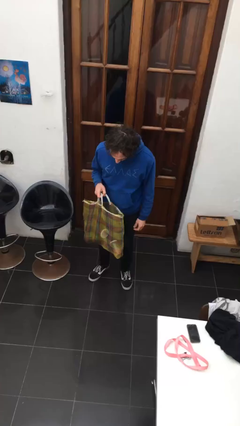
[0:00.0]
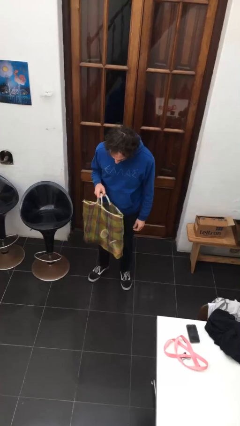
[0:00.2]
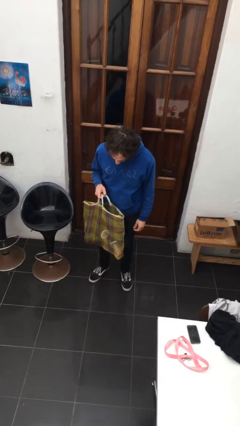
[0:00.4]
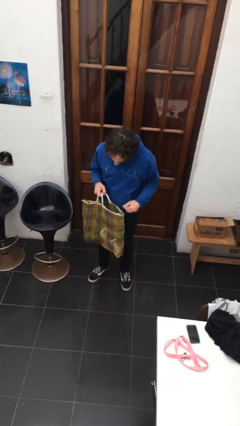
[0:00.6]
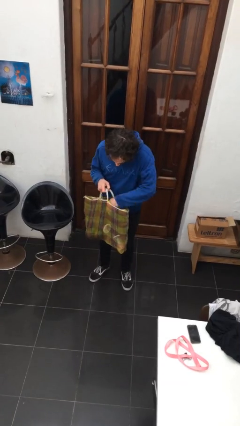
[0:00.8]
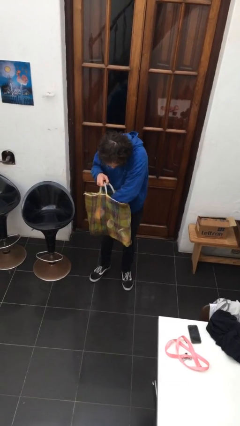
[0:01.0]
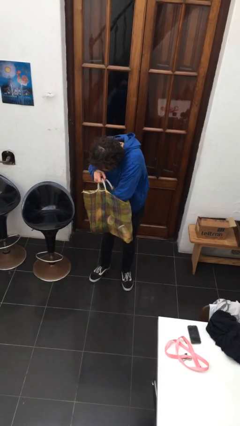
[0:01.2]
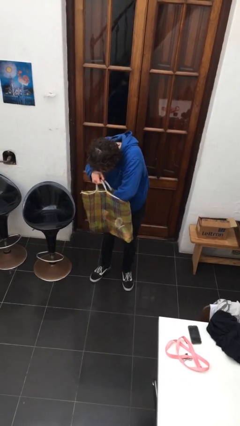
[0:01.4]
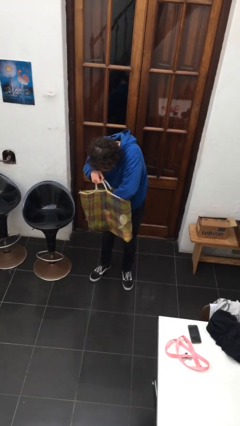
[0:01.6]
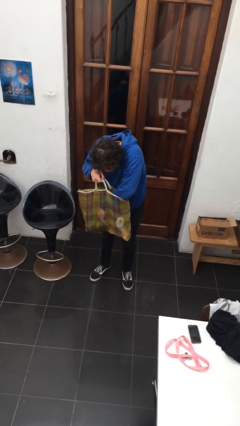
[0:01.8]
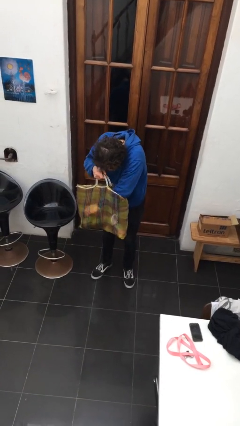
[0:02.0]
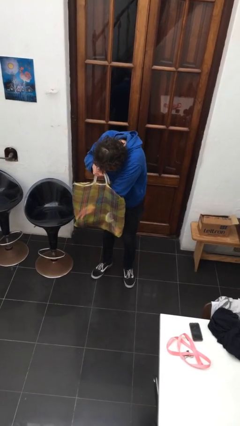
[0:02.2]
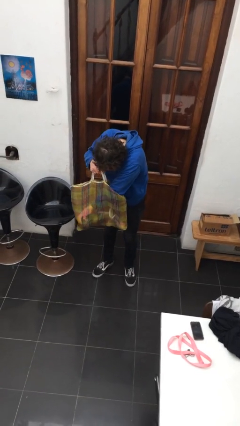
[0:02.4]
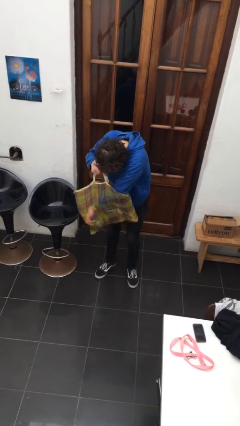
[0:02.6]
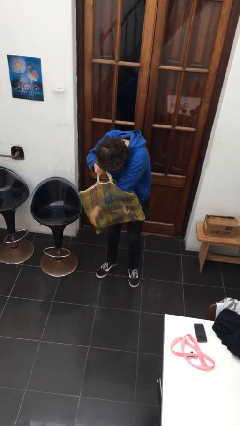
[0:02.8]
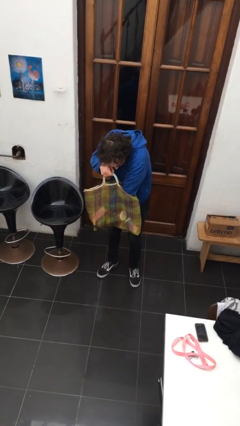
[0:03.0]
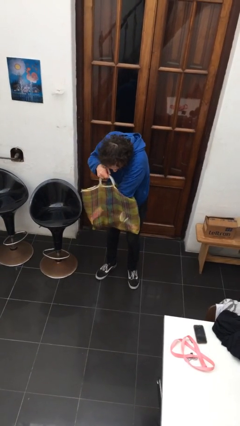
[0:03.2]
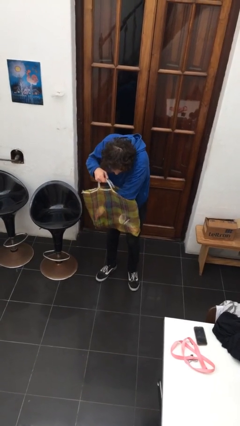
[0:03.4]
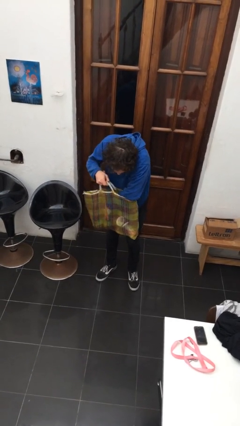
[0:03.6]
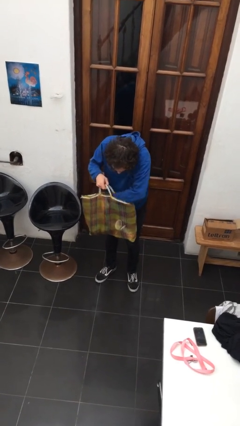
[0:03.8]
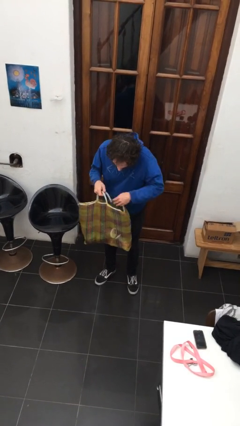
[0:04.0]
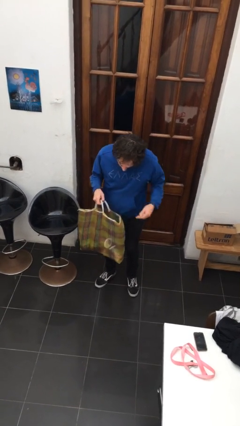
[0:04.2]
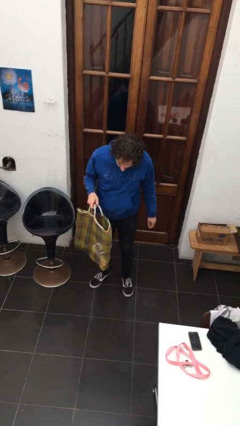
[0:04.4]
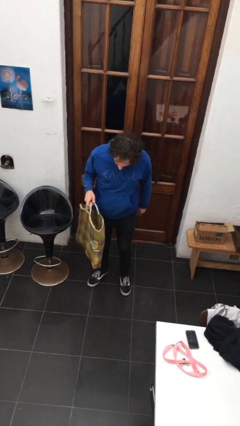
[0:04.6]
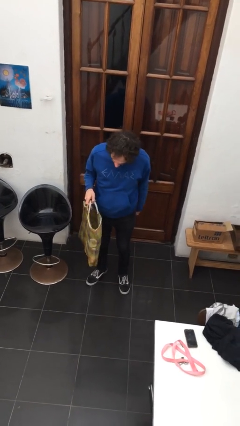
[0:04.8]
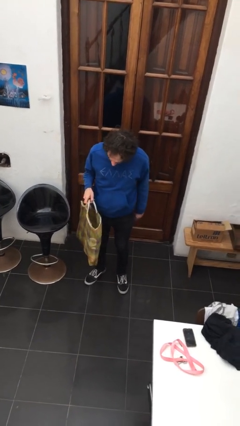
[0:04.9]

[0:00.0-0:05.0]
person searches in bag

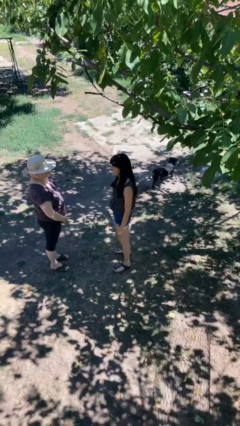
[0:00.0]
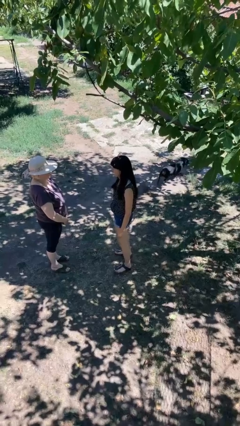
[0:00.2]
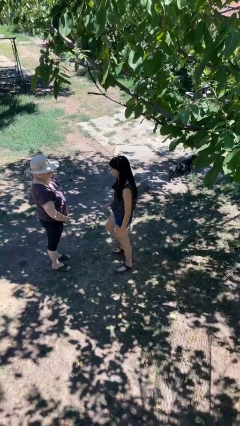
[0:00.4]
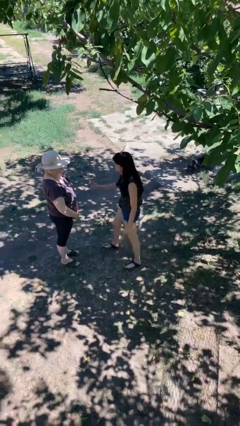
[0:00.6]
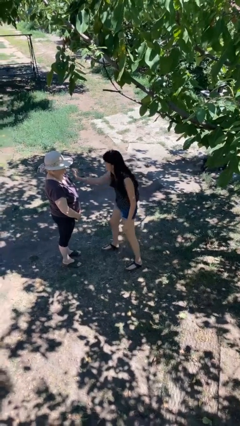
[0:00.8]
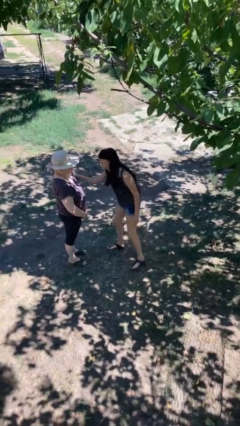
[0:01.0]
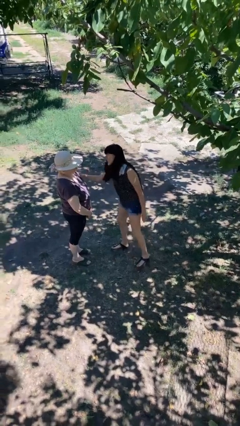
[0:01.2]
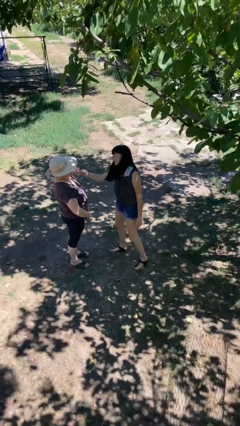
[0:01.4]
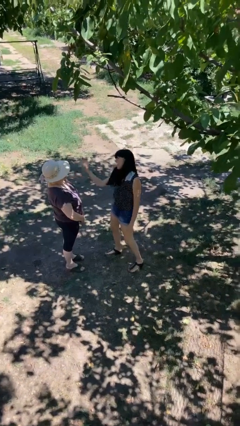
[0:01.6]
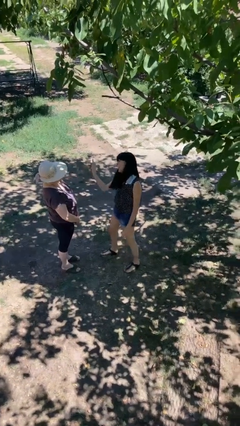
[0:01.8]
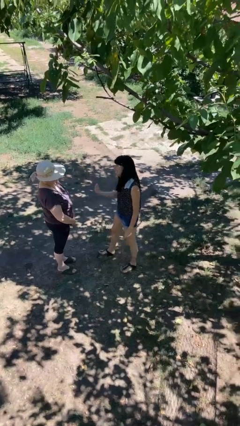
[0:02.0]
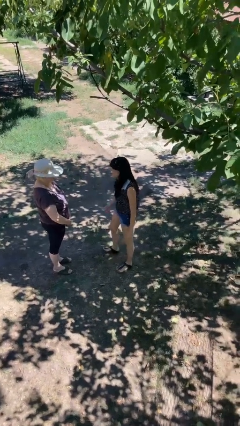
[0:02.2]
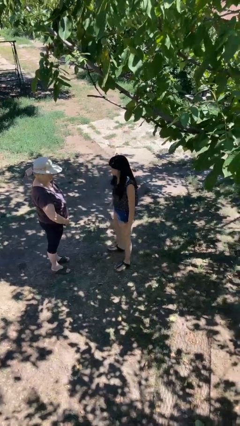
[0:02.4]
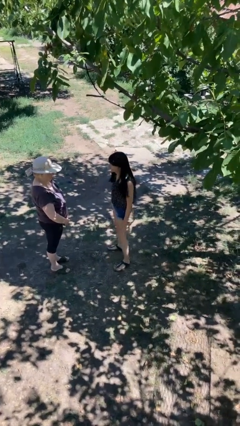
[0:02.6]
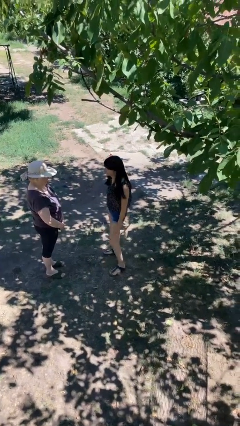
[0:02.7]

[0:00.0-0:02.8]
person shoves person

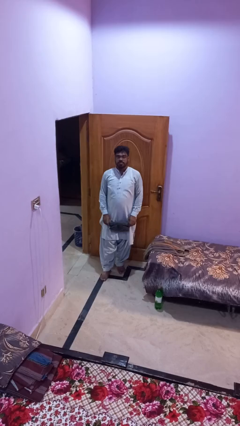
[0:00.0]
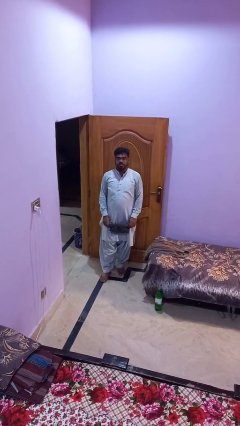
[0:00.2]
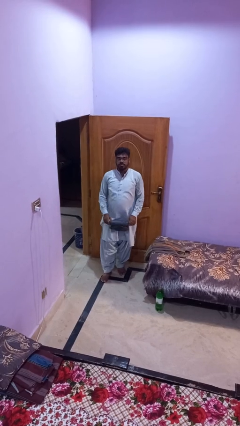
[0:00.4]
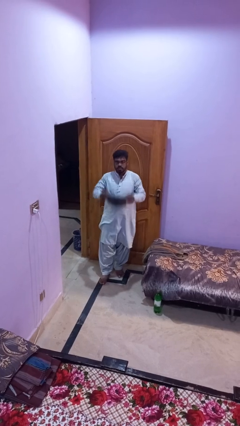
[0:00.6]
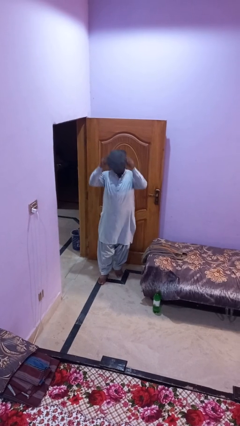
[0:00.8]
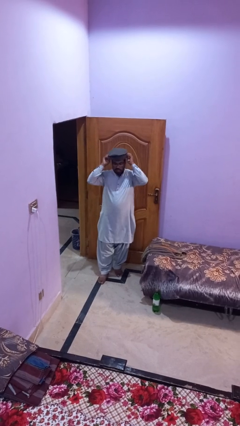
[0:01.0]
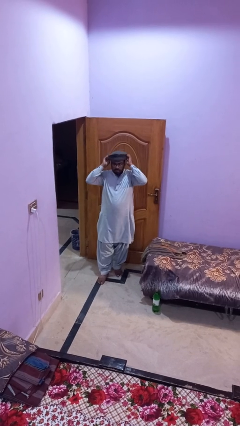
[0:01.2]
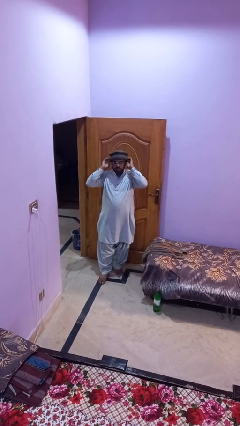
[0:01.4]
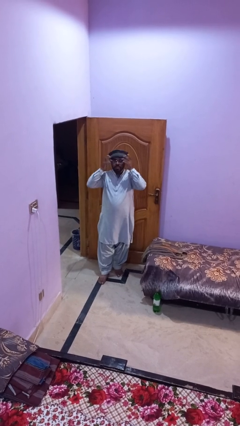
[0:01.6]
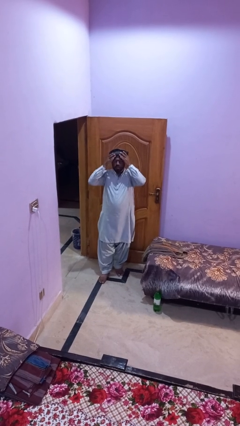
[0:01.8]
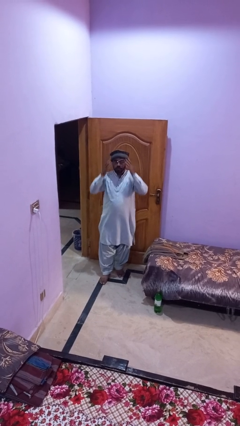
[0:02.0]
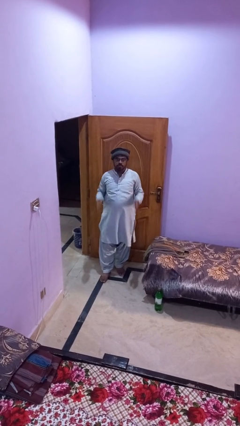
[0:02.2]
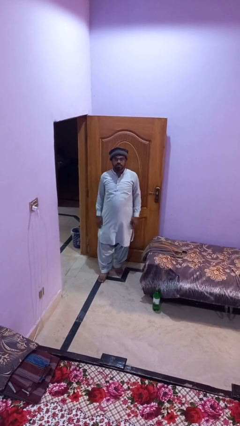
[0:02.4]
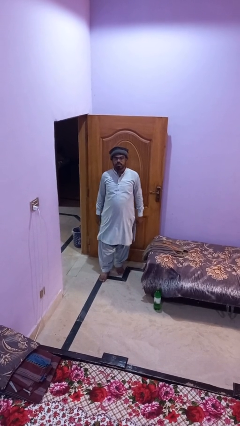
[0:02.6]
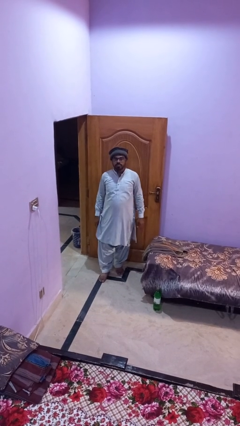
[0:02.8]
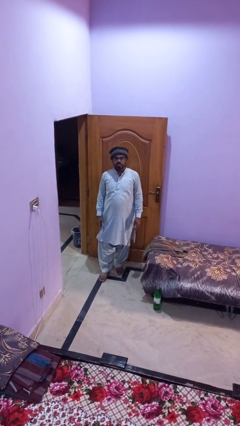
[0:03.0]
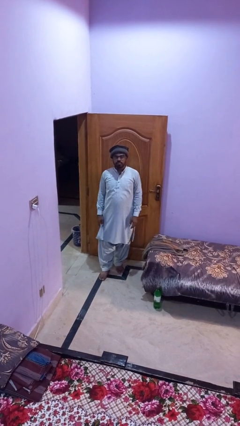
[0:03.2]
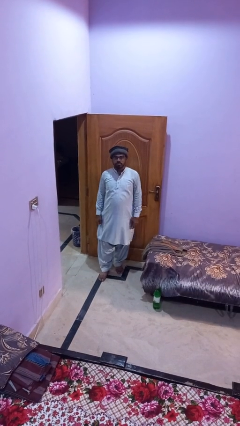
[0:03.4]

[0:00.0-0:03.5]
person puts on hat

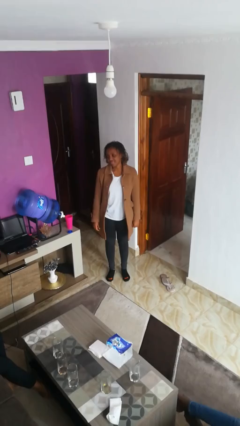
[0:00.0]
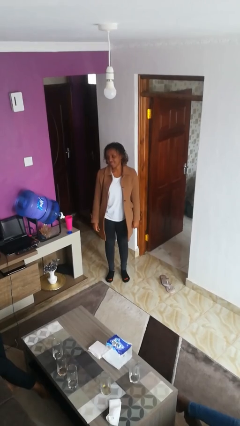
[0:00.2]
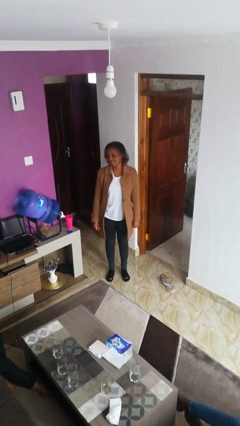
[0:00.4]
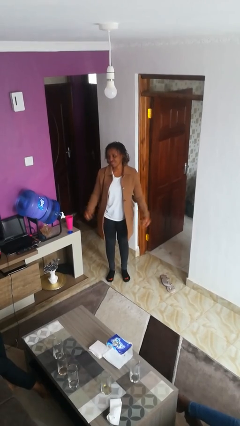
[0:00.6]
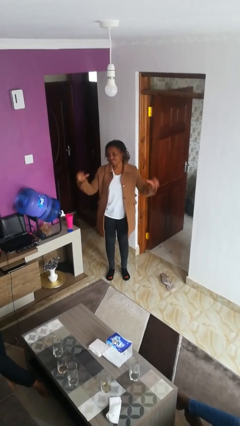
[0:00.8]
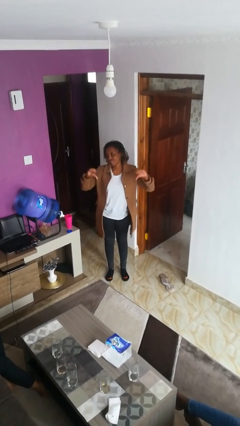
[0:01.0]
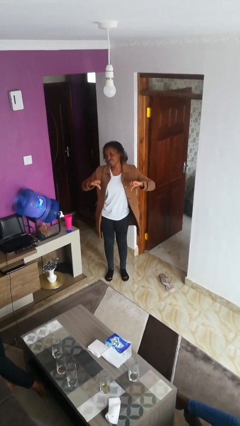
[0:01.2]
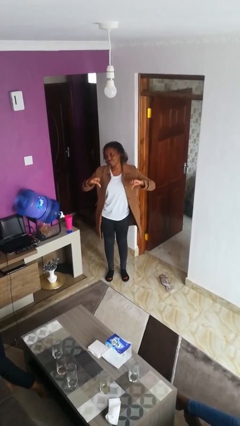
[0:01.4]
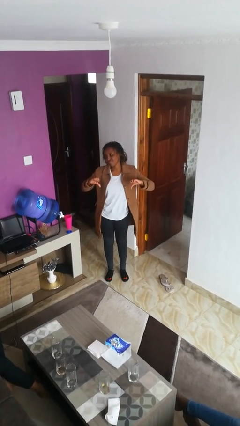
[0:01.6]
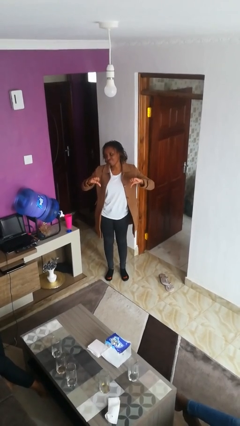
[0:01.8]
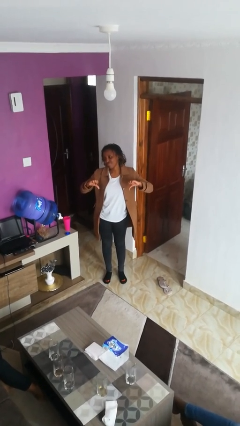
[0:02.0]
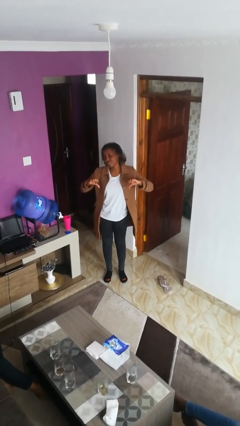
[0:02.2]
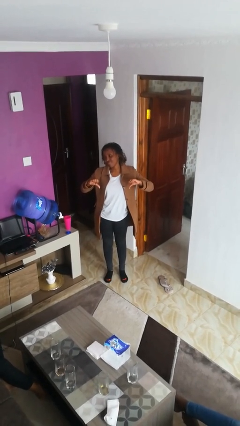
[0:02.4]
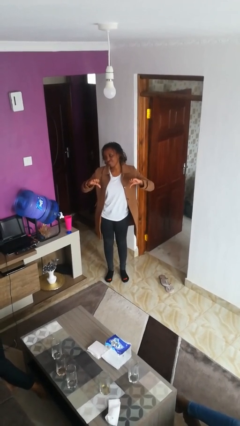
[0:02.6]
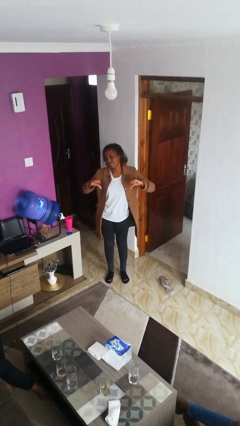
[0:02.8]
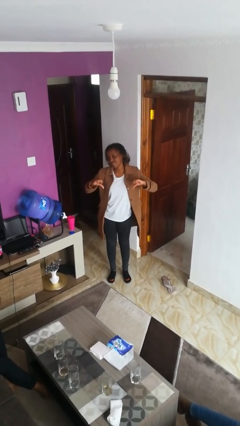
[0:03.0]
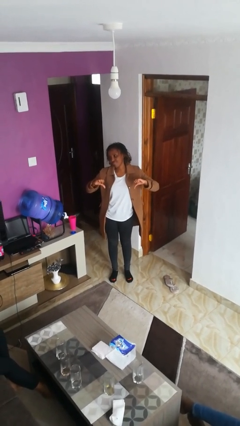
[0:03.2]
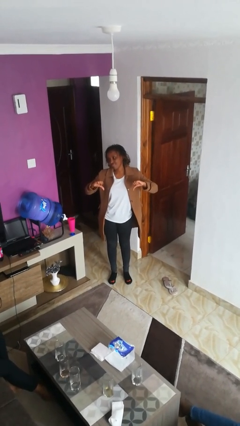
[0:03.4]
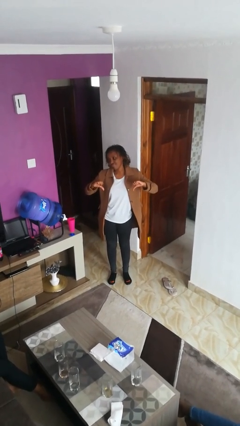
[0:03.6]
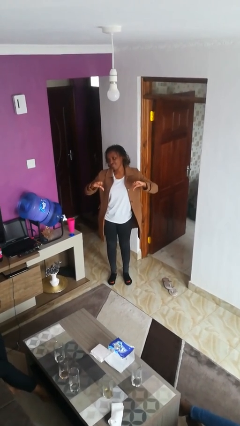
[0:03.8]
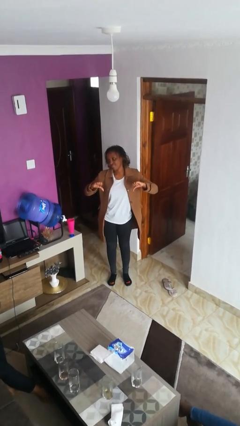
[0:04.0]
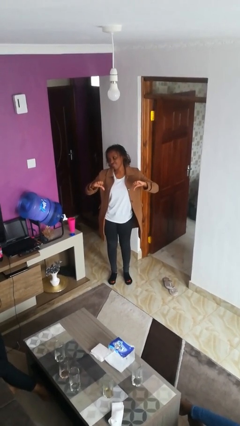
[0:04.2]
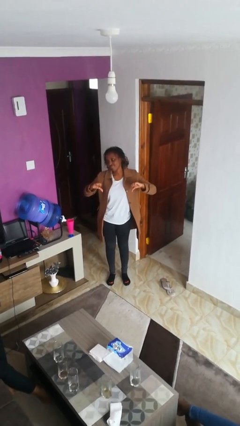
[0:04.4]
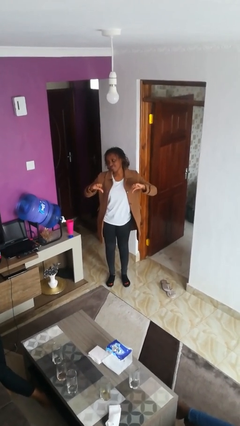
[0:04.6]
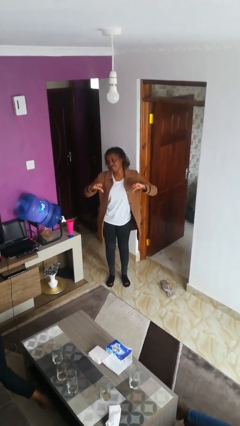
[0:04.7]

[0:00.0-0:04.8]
person gestures thumbs down

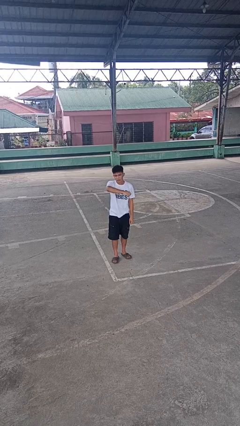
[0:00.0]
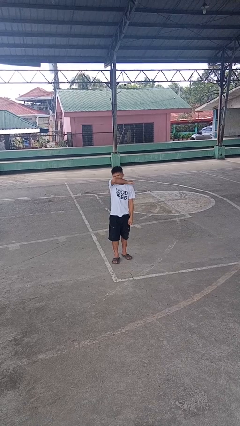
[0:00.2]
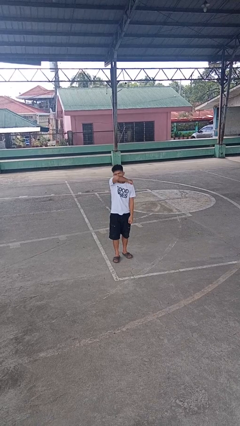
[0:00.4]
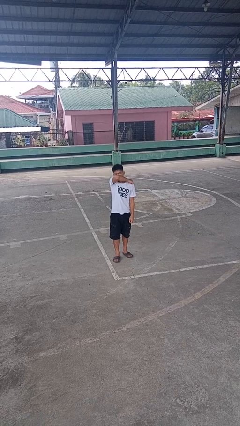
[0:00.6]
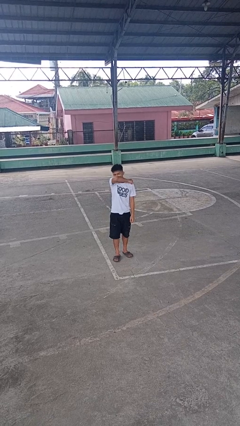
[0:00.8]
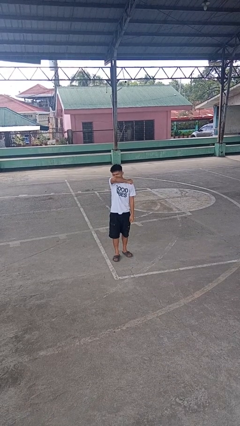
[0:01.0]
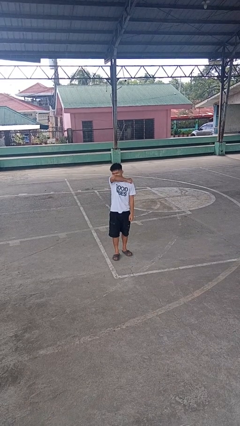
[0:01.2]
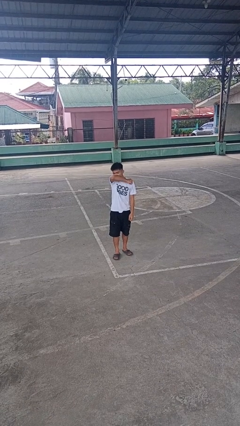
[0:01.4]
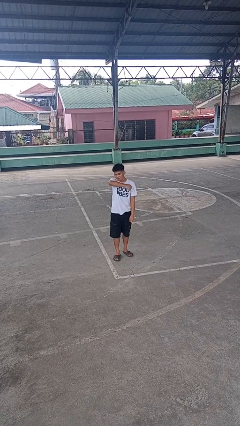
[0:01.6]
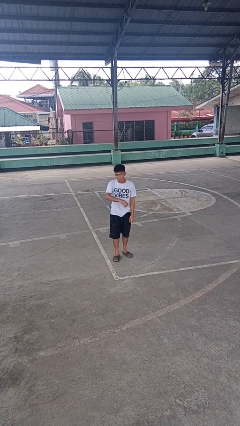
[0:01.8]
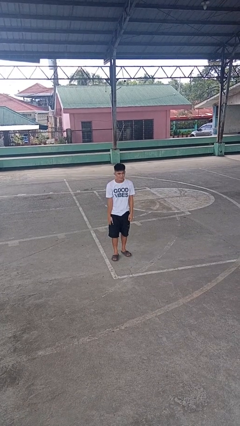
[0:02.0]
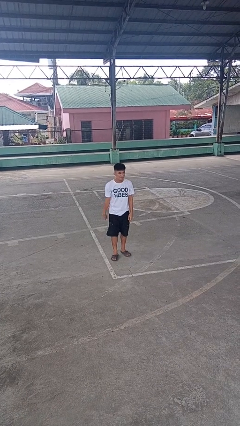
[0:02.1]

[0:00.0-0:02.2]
person sneezes into arm
